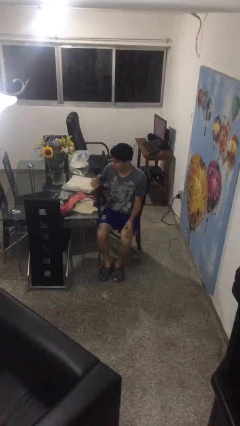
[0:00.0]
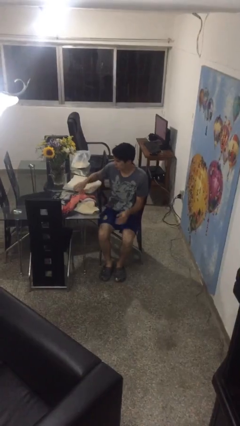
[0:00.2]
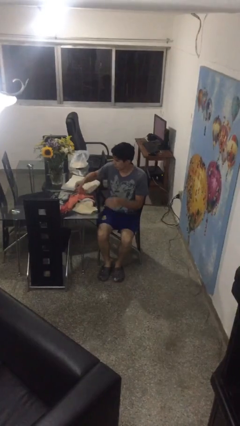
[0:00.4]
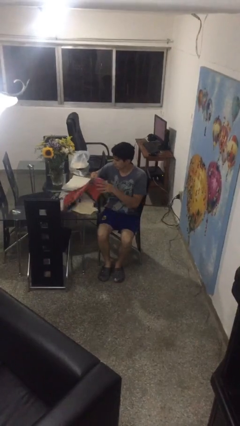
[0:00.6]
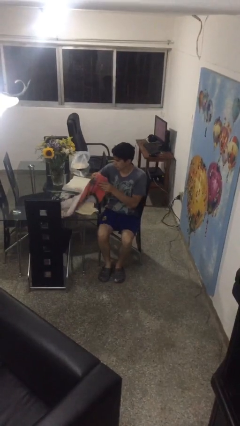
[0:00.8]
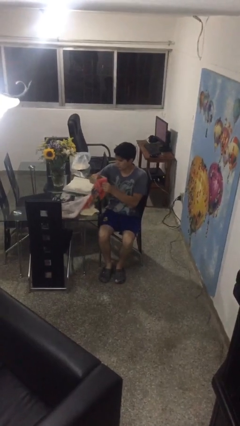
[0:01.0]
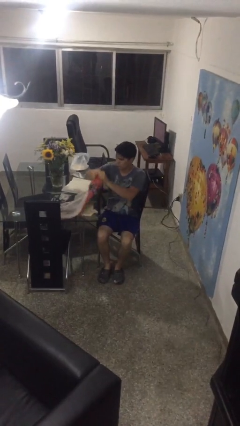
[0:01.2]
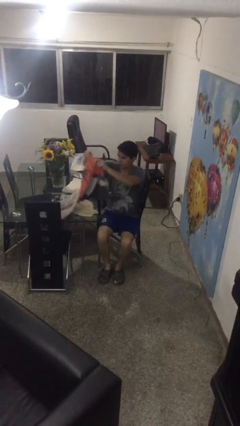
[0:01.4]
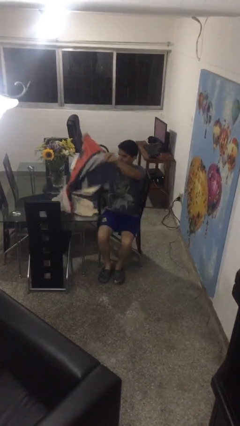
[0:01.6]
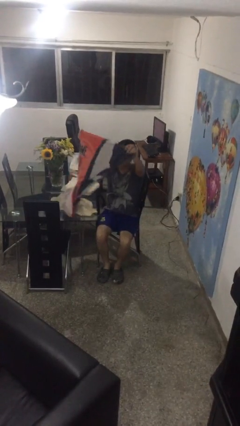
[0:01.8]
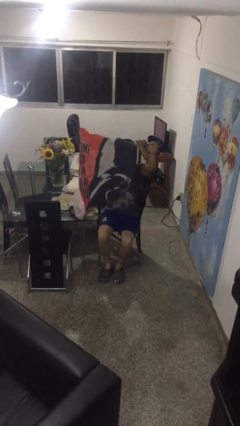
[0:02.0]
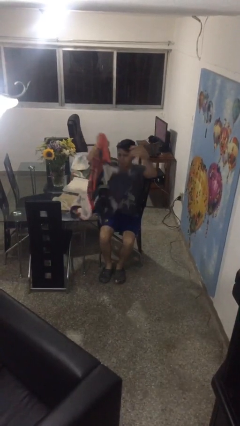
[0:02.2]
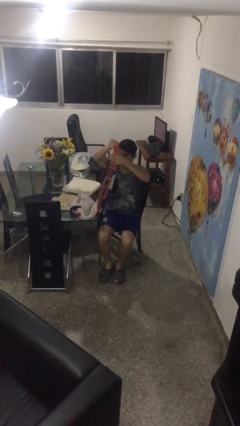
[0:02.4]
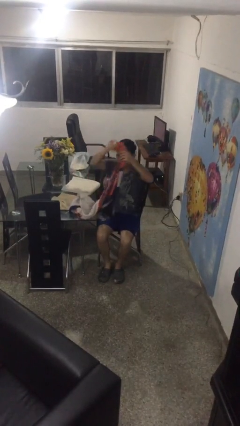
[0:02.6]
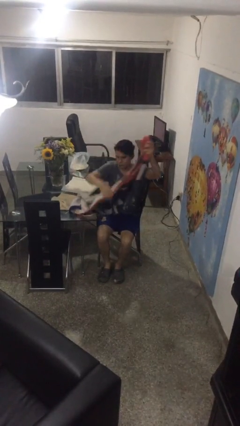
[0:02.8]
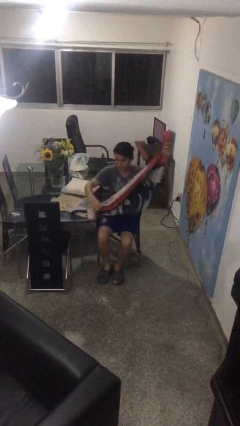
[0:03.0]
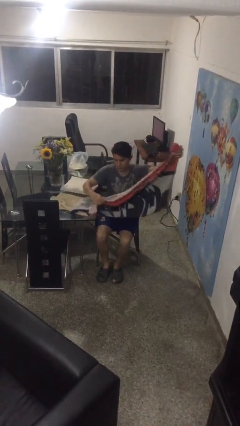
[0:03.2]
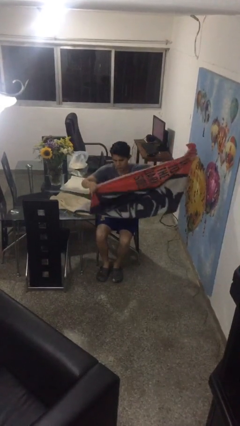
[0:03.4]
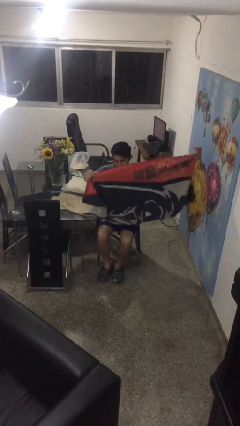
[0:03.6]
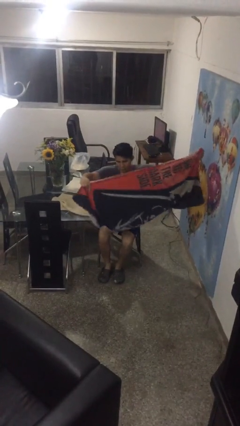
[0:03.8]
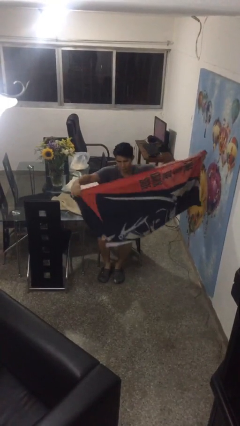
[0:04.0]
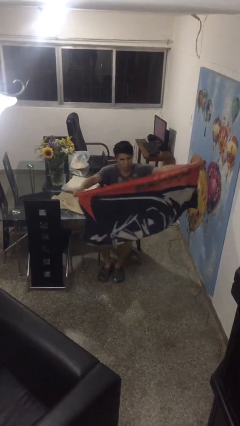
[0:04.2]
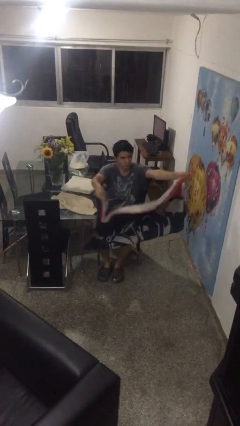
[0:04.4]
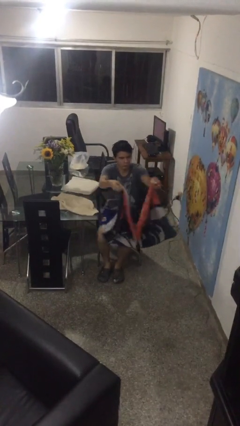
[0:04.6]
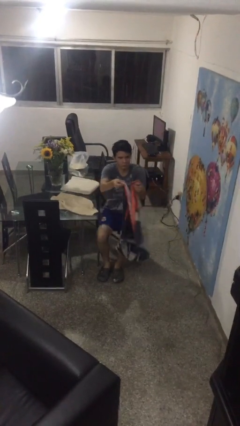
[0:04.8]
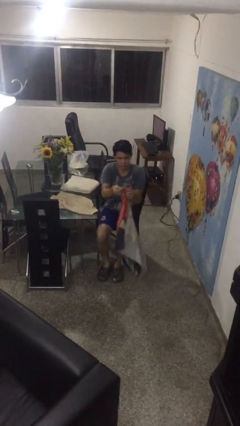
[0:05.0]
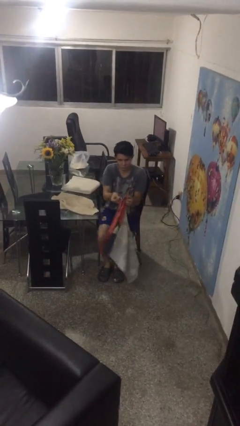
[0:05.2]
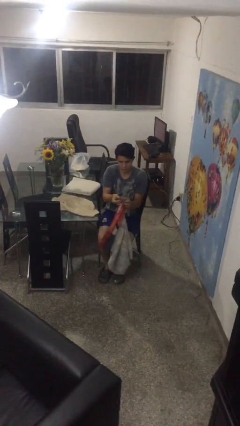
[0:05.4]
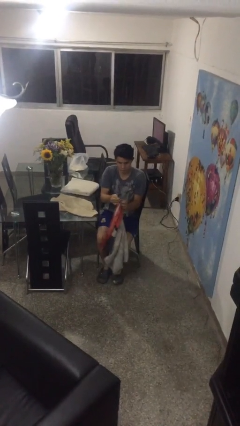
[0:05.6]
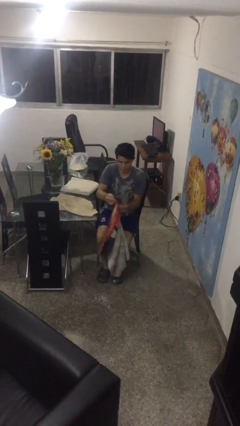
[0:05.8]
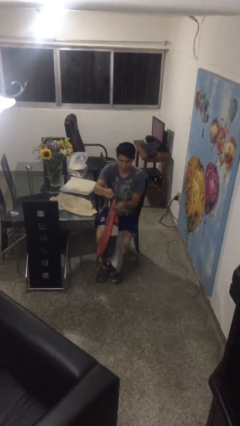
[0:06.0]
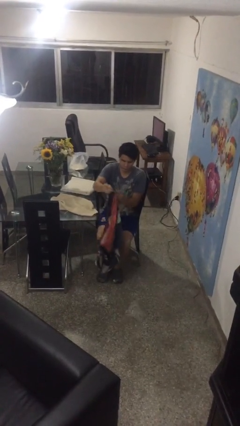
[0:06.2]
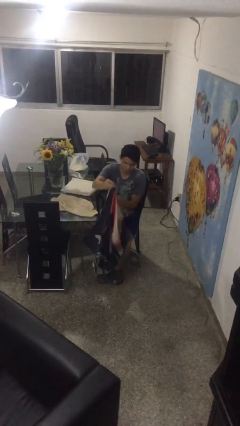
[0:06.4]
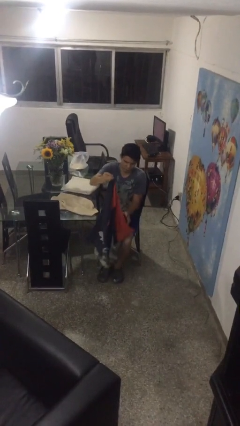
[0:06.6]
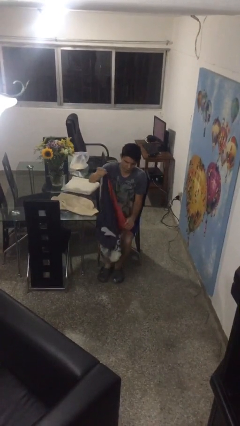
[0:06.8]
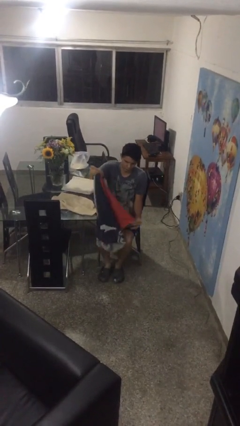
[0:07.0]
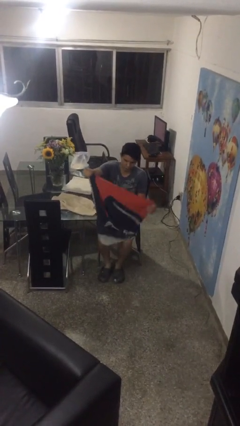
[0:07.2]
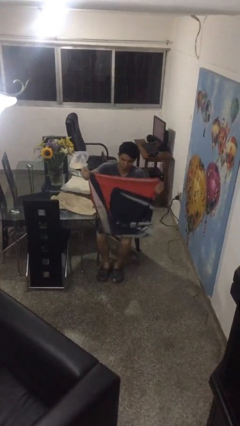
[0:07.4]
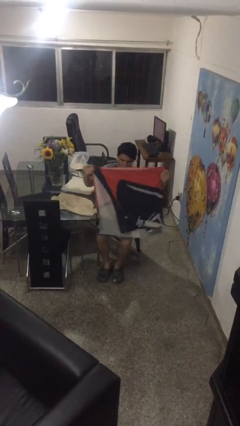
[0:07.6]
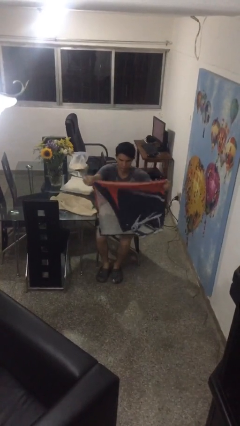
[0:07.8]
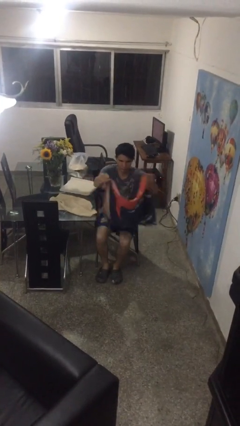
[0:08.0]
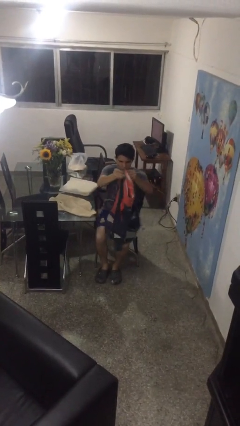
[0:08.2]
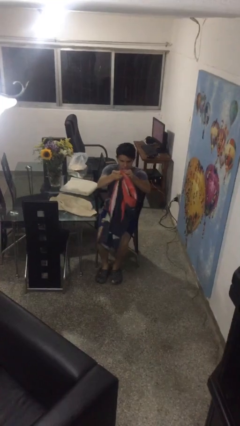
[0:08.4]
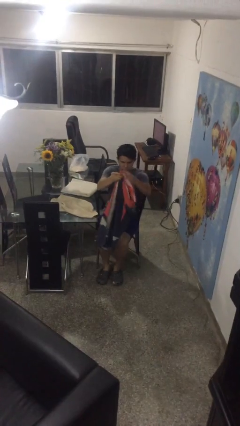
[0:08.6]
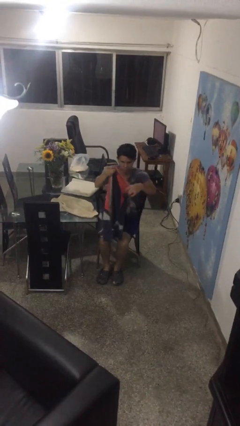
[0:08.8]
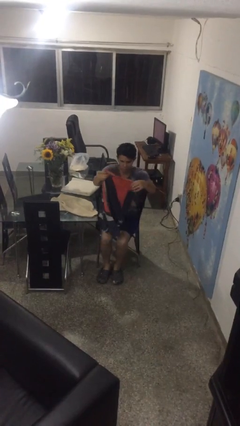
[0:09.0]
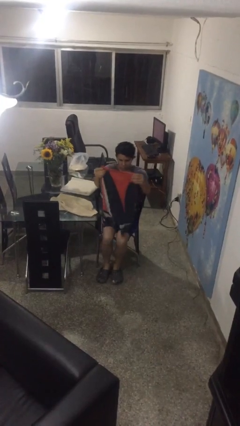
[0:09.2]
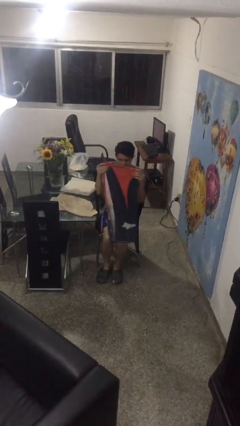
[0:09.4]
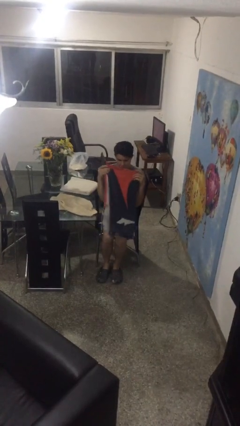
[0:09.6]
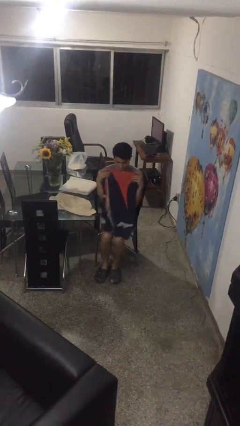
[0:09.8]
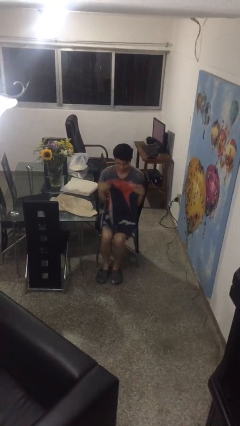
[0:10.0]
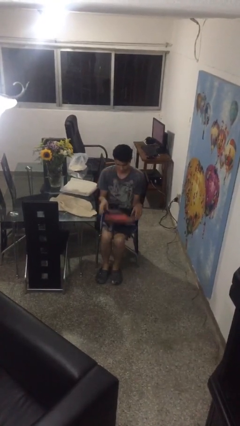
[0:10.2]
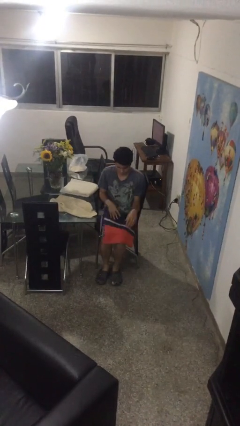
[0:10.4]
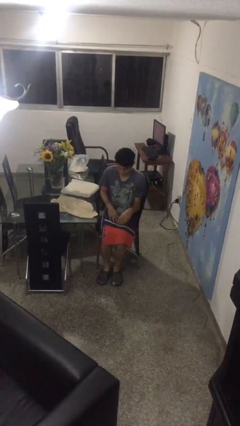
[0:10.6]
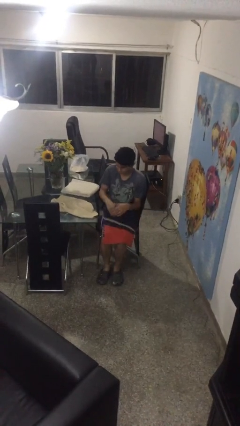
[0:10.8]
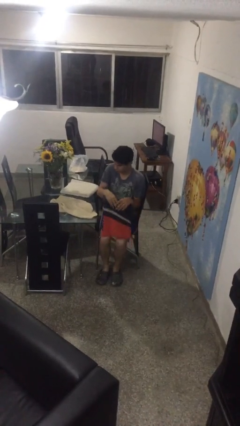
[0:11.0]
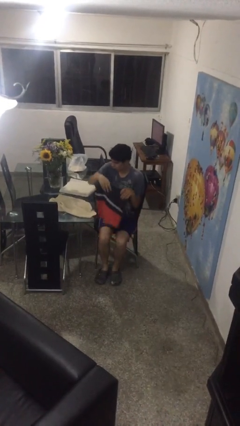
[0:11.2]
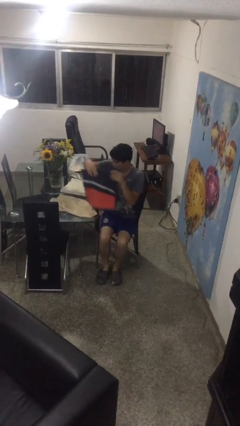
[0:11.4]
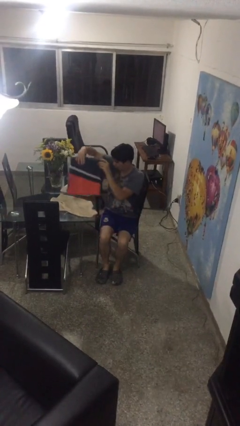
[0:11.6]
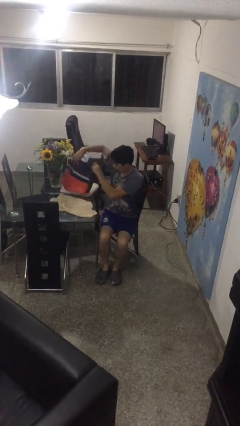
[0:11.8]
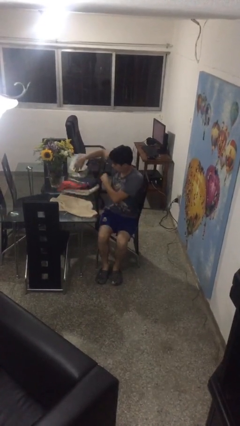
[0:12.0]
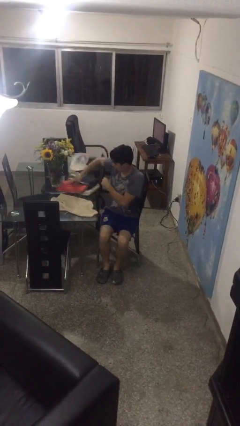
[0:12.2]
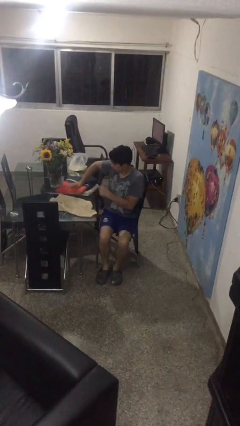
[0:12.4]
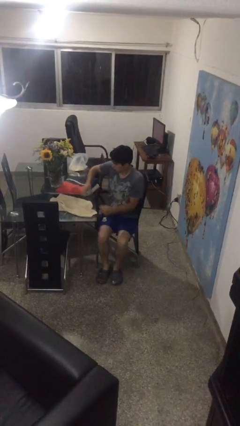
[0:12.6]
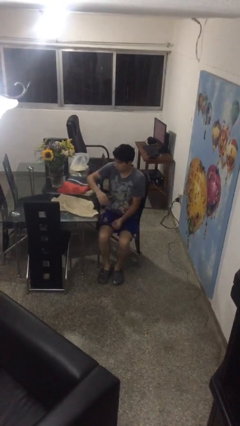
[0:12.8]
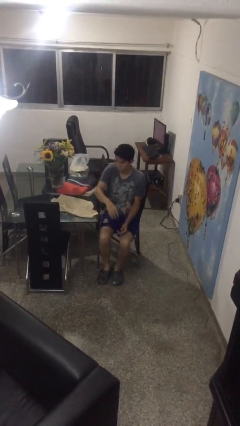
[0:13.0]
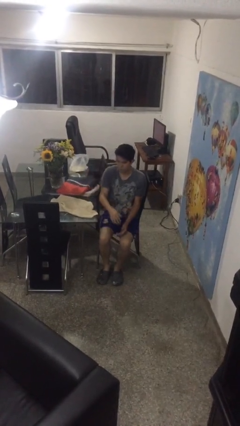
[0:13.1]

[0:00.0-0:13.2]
person folds towel

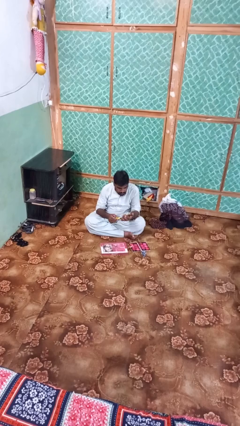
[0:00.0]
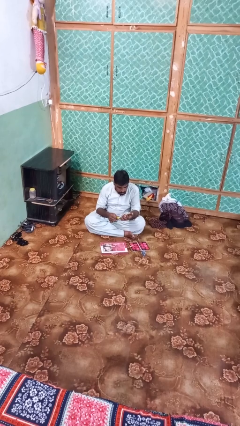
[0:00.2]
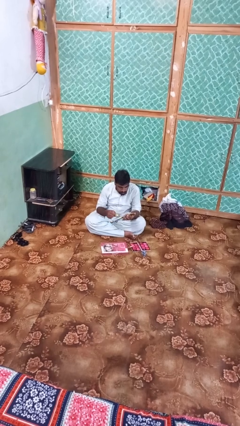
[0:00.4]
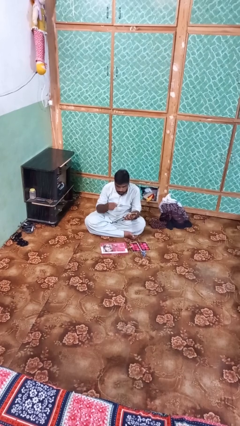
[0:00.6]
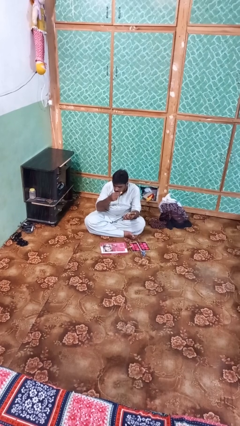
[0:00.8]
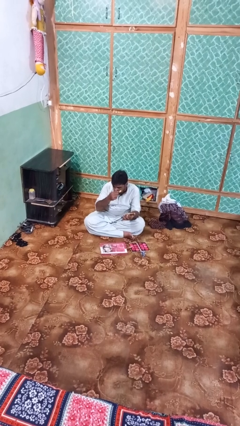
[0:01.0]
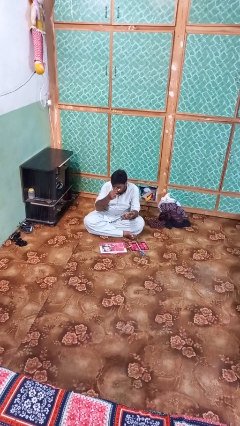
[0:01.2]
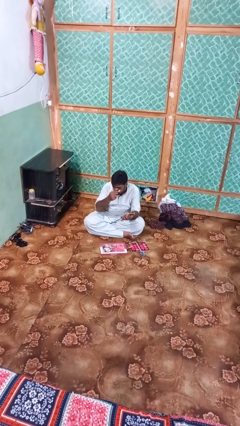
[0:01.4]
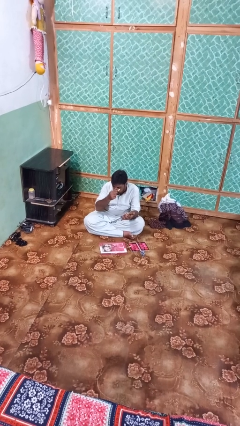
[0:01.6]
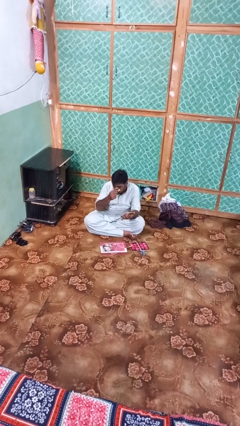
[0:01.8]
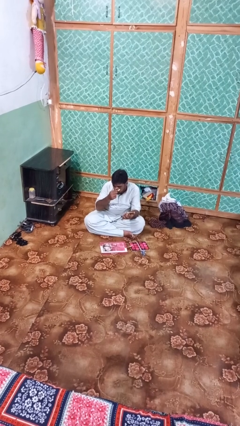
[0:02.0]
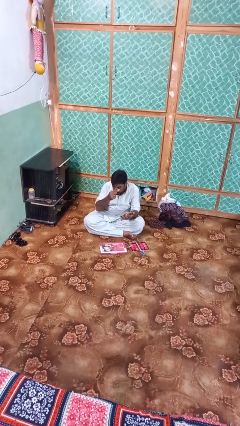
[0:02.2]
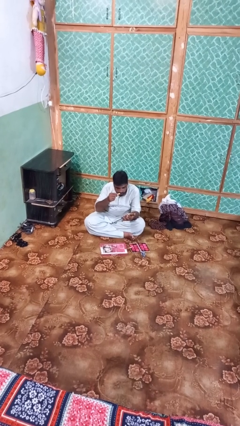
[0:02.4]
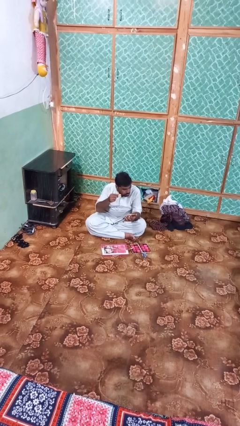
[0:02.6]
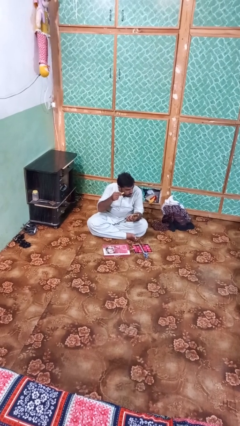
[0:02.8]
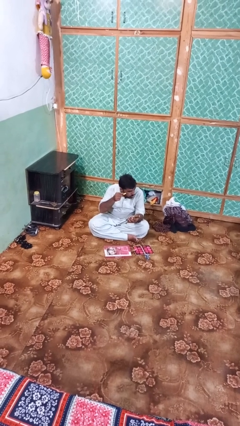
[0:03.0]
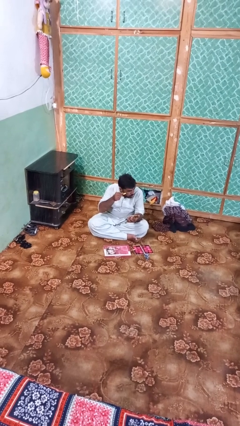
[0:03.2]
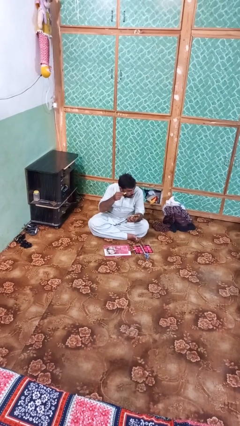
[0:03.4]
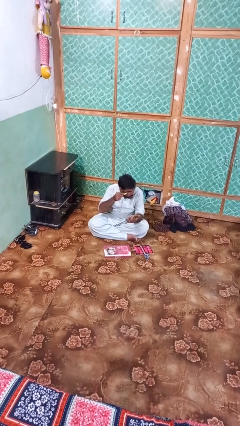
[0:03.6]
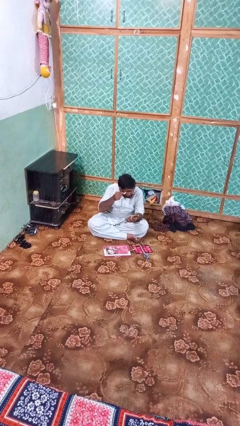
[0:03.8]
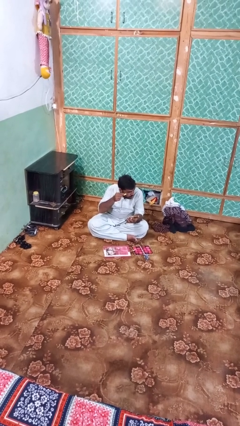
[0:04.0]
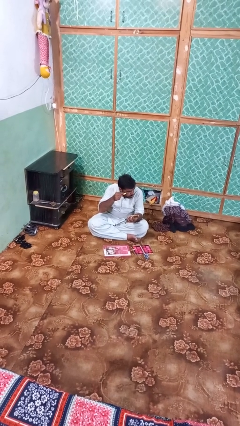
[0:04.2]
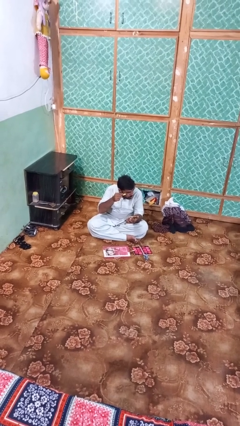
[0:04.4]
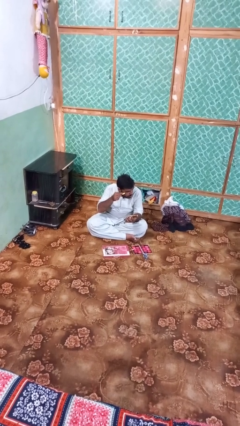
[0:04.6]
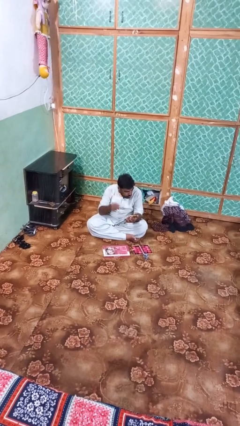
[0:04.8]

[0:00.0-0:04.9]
person applies eye makeup

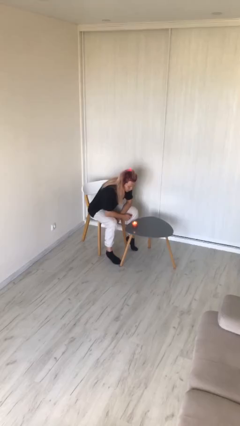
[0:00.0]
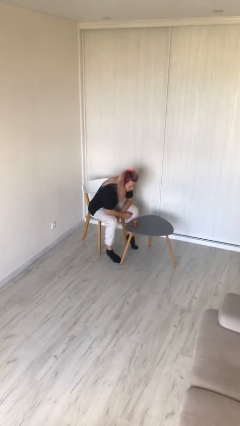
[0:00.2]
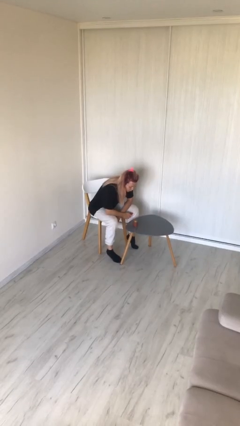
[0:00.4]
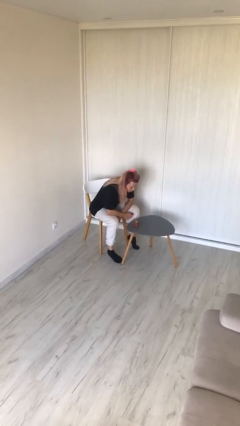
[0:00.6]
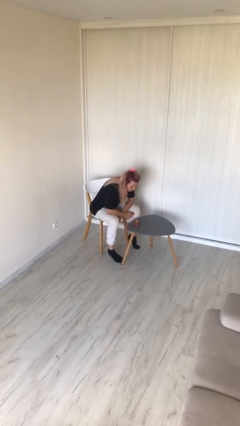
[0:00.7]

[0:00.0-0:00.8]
person extinguishes candle
